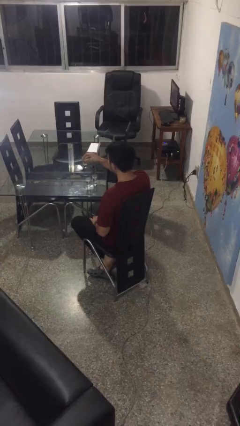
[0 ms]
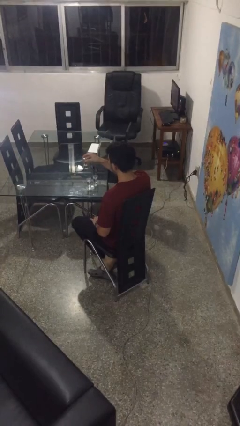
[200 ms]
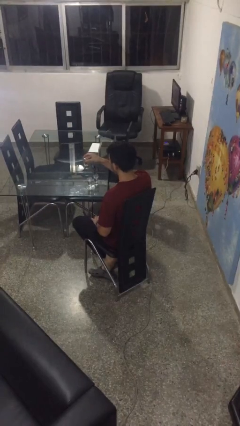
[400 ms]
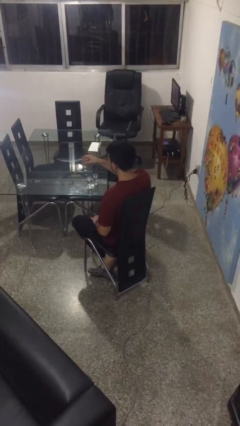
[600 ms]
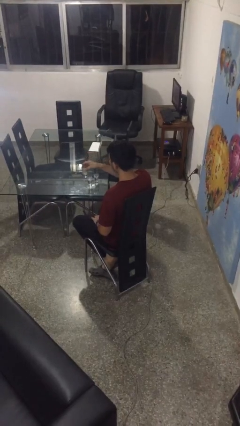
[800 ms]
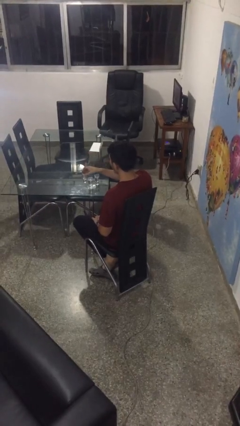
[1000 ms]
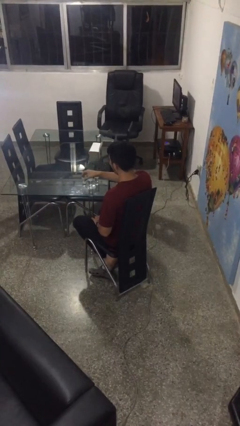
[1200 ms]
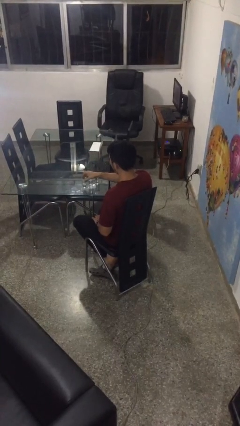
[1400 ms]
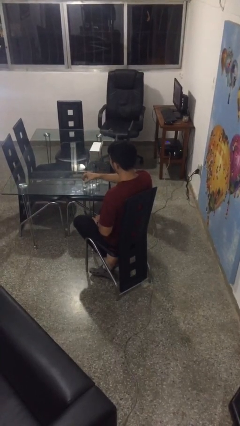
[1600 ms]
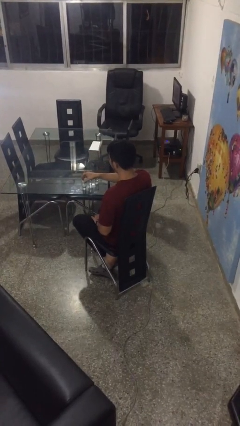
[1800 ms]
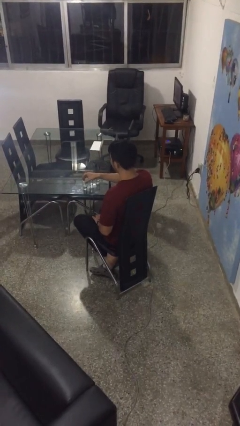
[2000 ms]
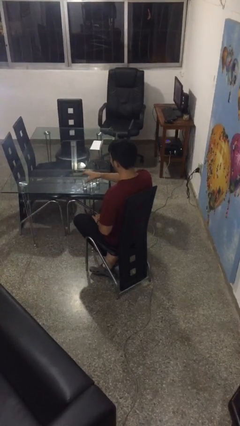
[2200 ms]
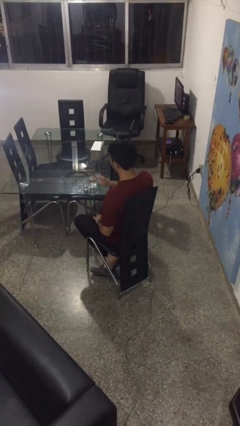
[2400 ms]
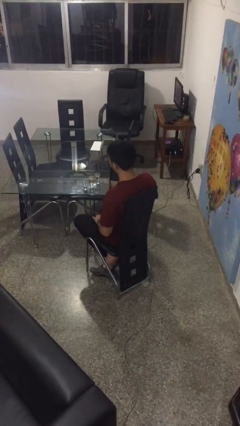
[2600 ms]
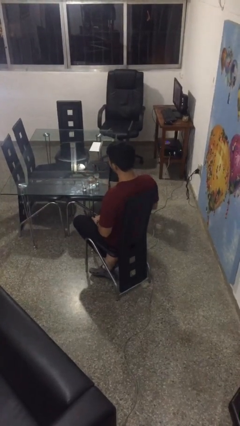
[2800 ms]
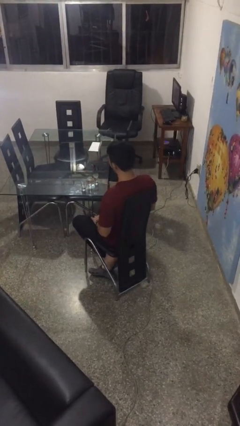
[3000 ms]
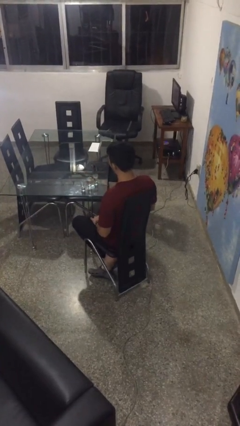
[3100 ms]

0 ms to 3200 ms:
person puts down object on table

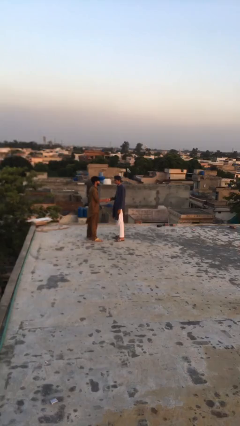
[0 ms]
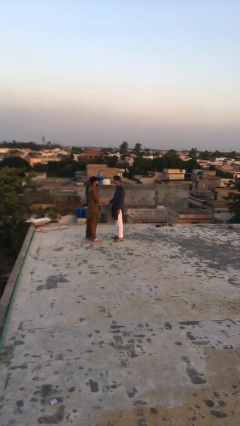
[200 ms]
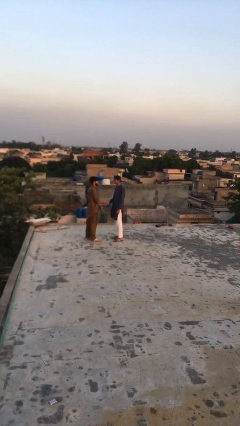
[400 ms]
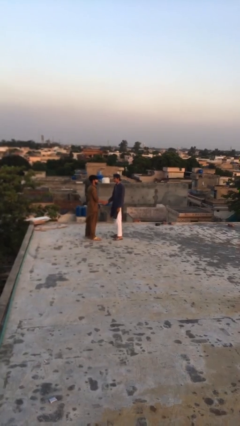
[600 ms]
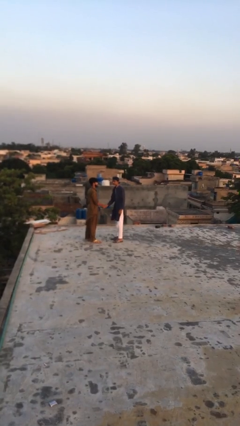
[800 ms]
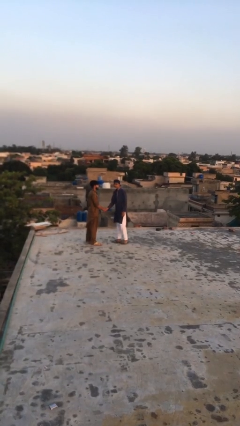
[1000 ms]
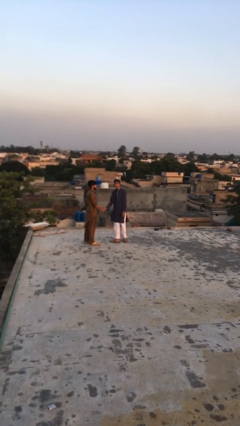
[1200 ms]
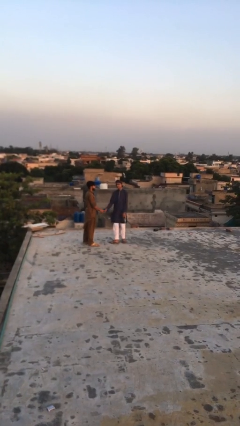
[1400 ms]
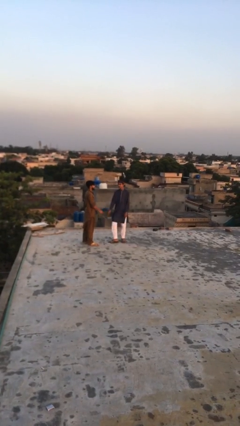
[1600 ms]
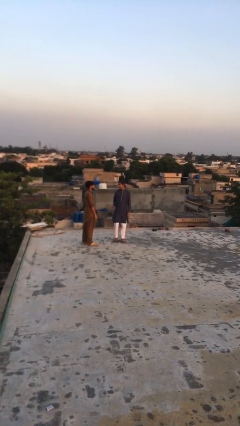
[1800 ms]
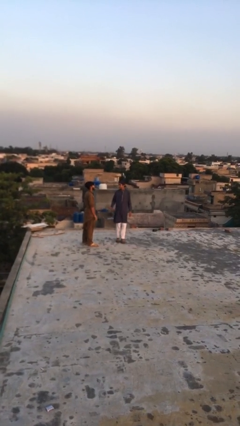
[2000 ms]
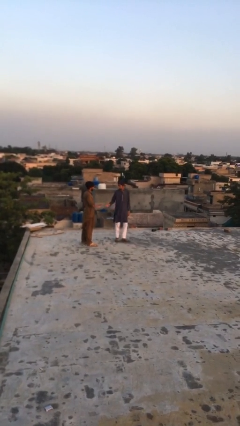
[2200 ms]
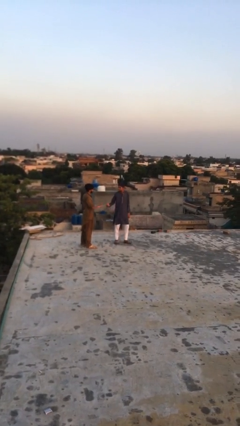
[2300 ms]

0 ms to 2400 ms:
person shakes hand

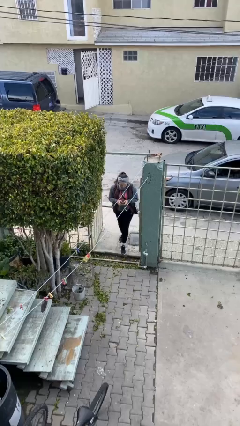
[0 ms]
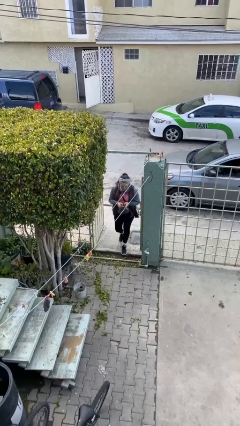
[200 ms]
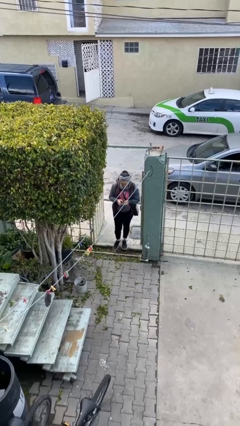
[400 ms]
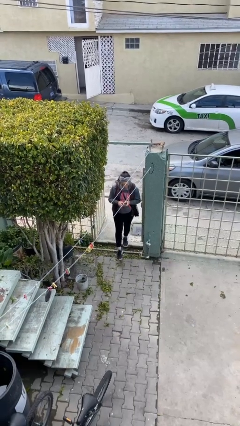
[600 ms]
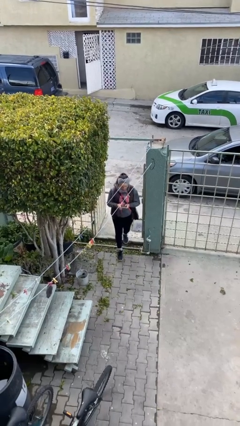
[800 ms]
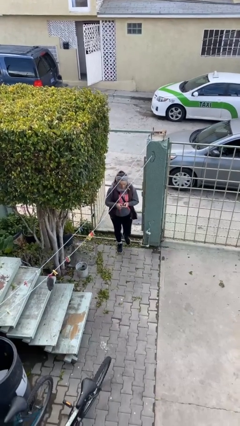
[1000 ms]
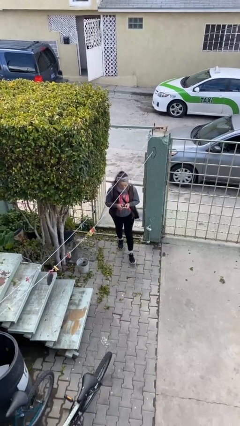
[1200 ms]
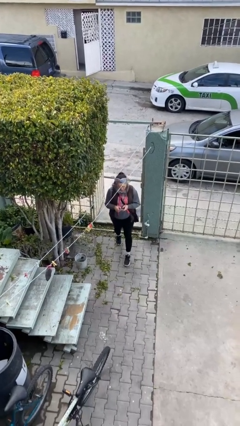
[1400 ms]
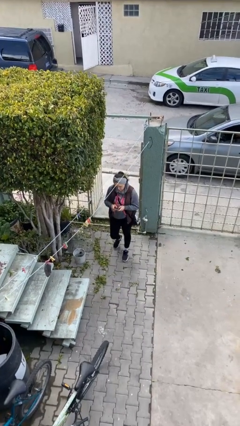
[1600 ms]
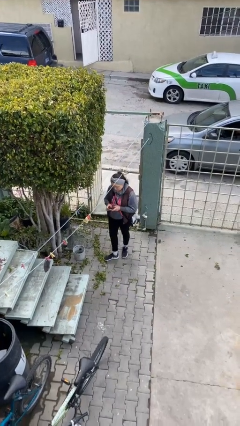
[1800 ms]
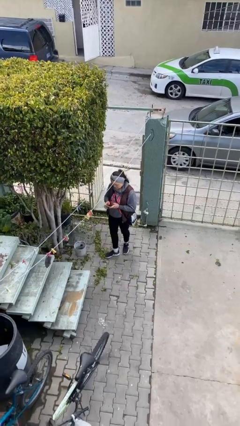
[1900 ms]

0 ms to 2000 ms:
person enters scene through structure

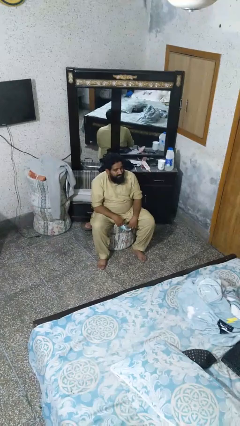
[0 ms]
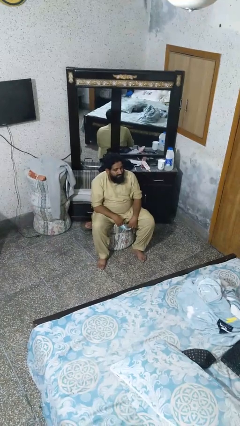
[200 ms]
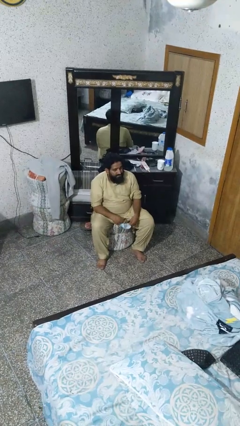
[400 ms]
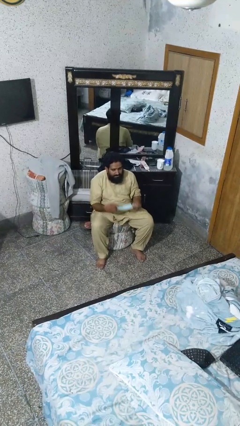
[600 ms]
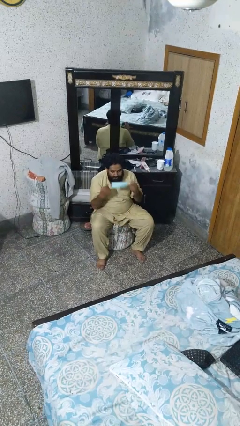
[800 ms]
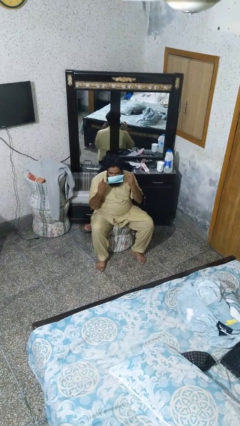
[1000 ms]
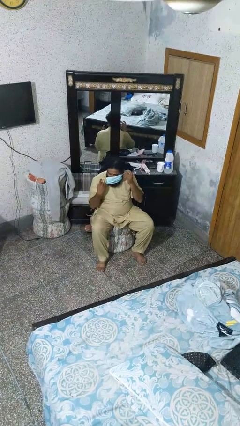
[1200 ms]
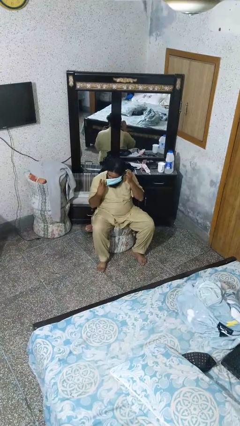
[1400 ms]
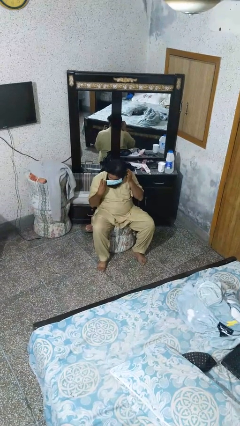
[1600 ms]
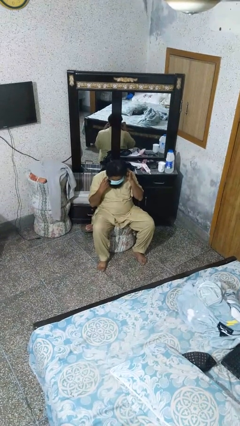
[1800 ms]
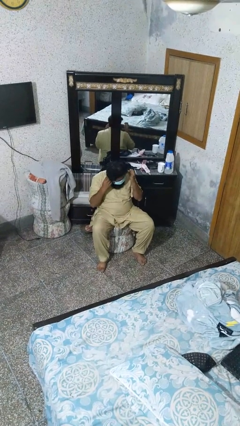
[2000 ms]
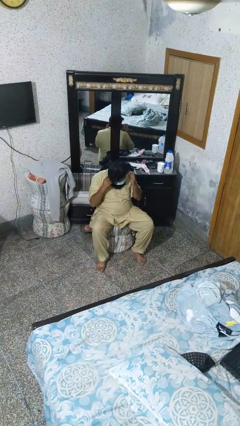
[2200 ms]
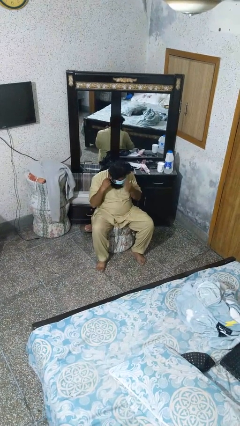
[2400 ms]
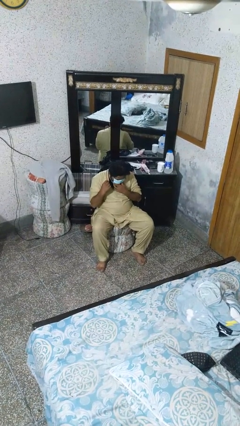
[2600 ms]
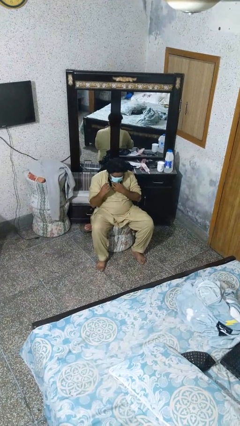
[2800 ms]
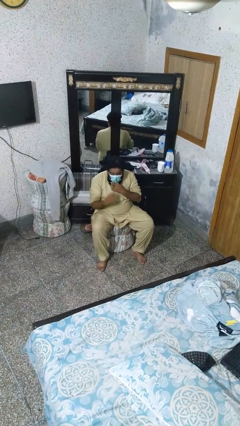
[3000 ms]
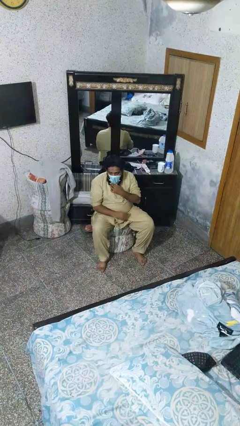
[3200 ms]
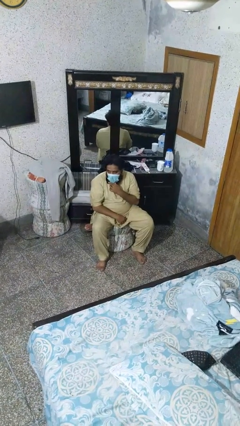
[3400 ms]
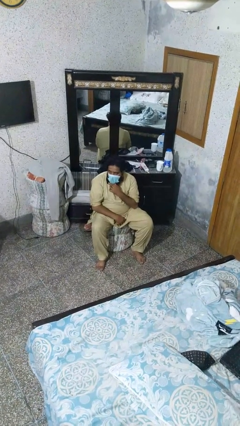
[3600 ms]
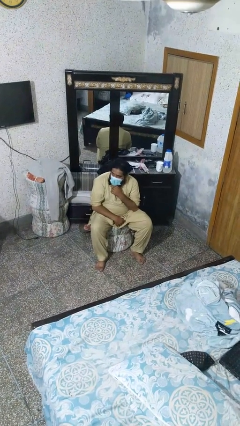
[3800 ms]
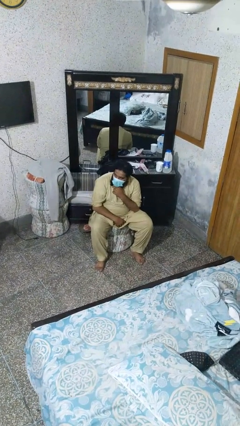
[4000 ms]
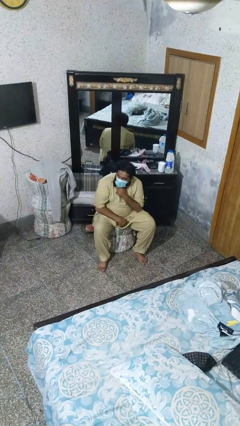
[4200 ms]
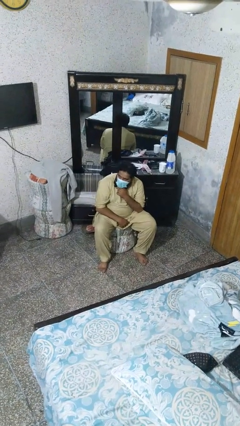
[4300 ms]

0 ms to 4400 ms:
person puts on facemask

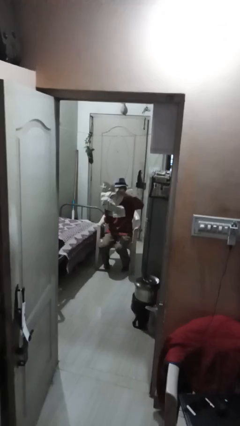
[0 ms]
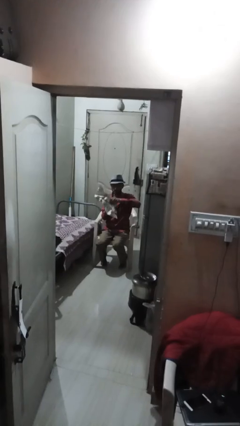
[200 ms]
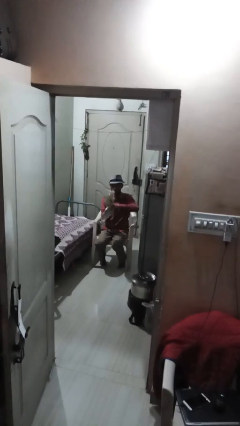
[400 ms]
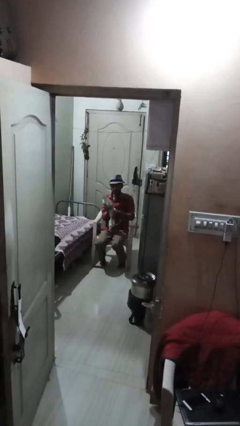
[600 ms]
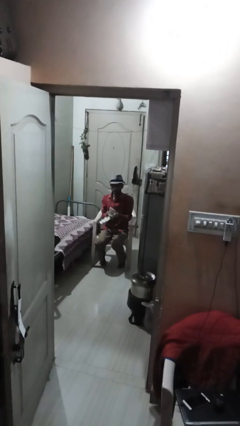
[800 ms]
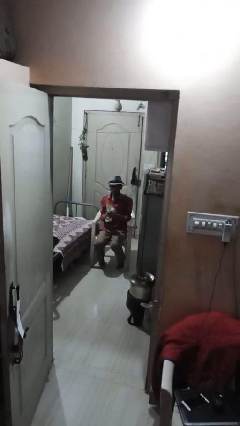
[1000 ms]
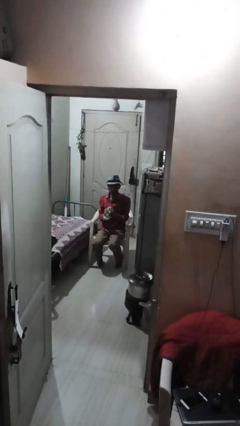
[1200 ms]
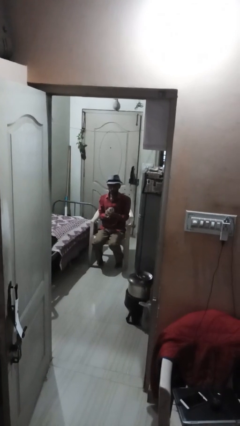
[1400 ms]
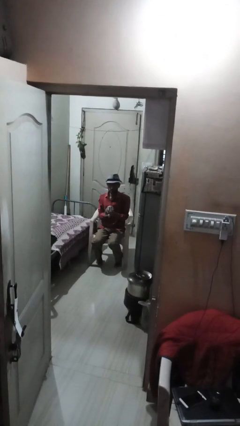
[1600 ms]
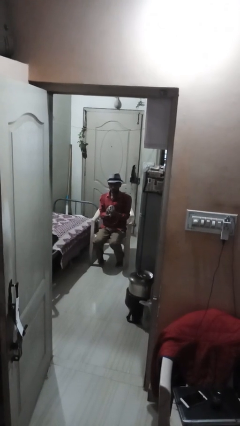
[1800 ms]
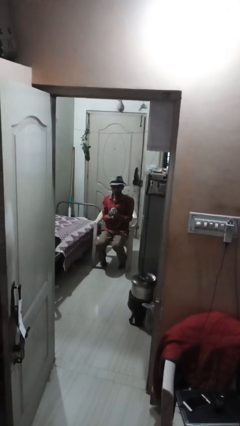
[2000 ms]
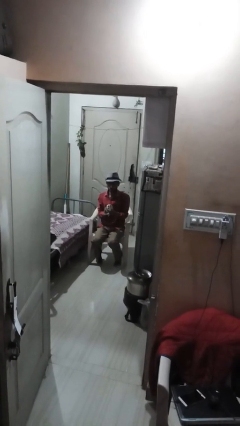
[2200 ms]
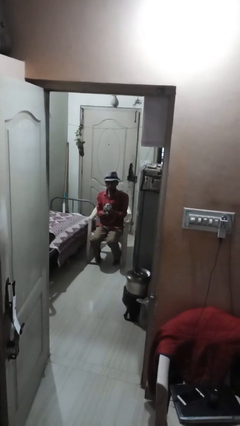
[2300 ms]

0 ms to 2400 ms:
person crumples paper

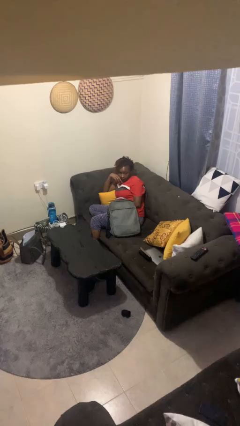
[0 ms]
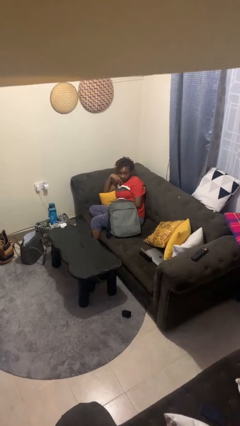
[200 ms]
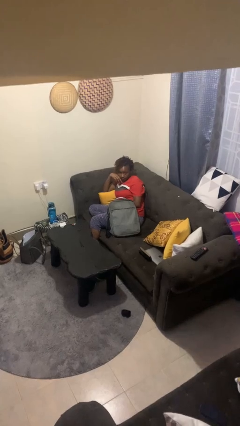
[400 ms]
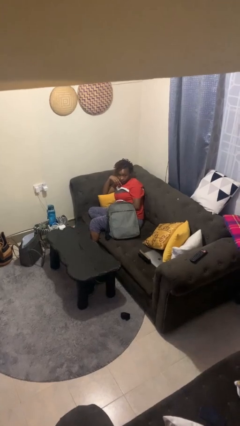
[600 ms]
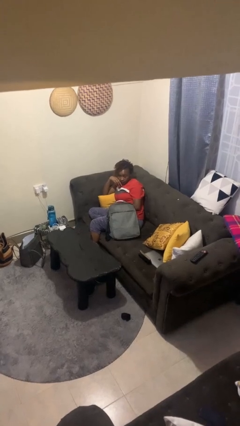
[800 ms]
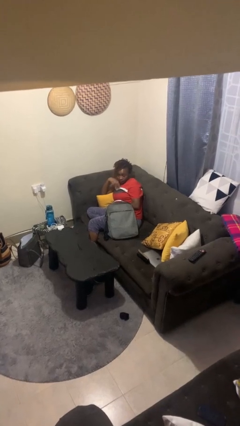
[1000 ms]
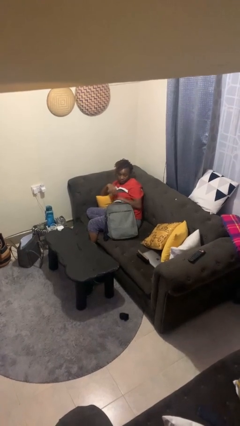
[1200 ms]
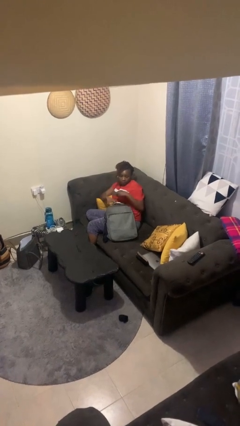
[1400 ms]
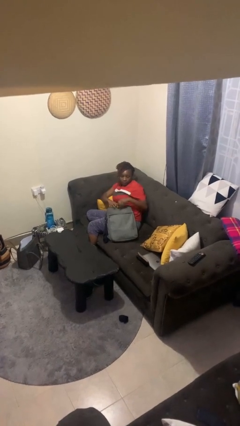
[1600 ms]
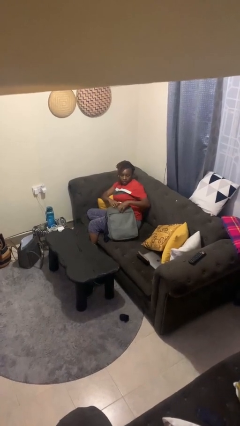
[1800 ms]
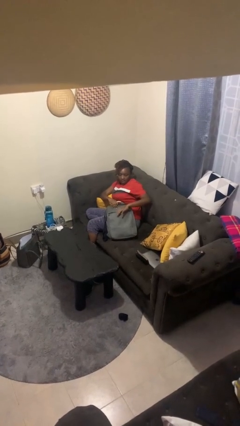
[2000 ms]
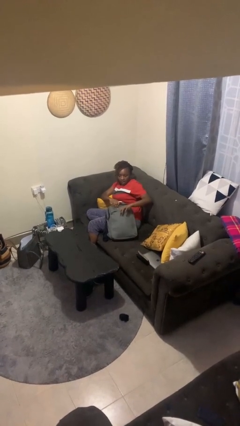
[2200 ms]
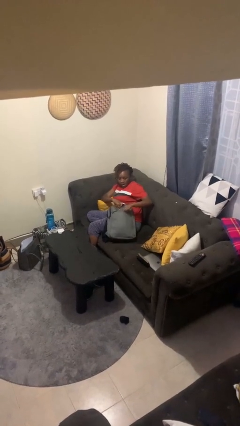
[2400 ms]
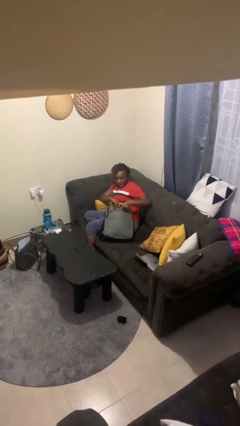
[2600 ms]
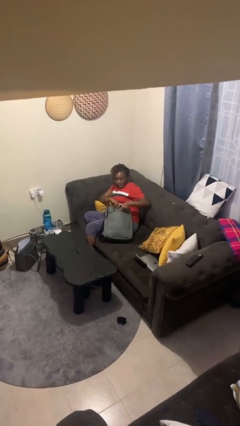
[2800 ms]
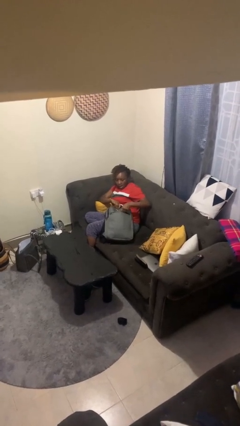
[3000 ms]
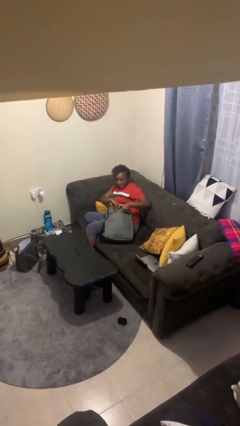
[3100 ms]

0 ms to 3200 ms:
person searches in backpack
